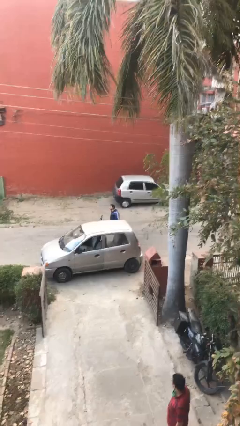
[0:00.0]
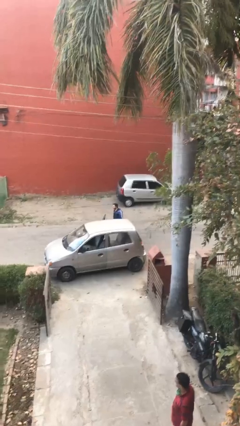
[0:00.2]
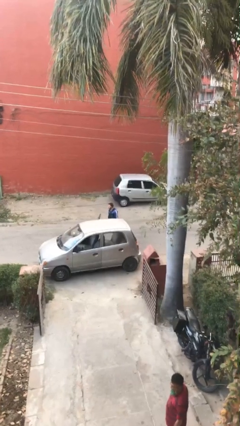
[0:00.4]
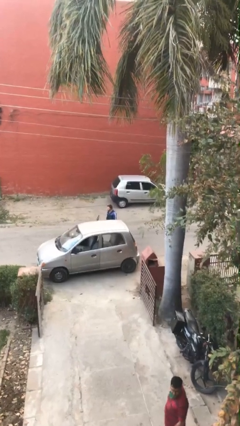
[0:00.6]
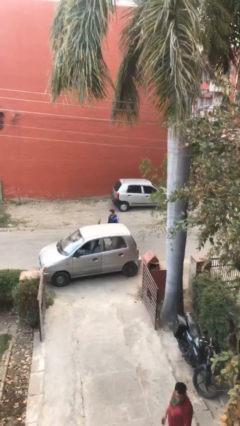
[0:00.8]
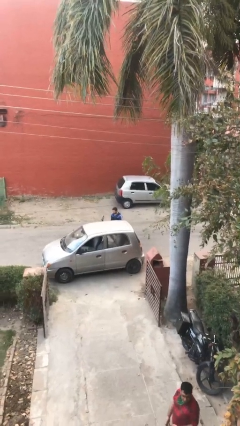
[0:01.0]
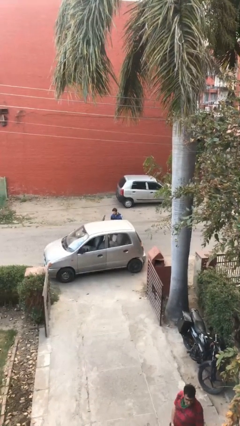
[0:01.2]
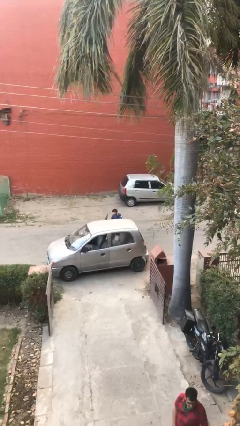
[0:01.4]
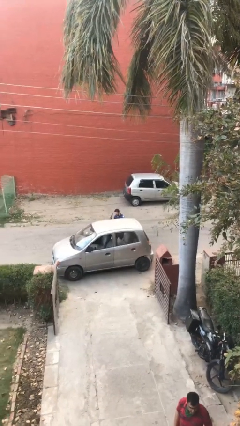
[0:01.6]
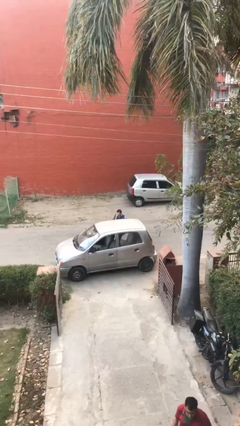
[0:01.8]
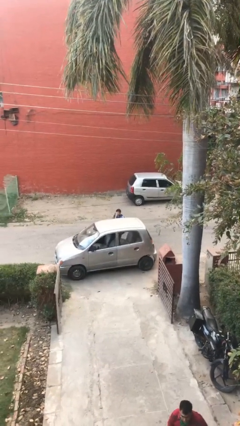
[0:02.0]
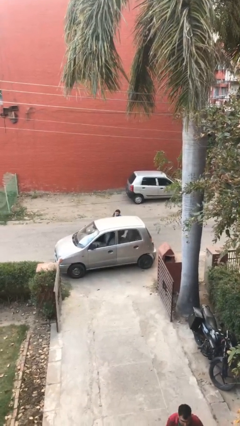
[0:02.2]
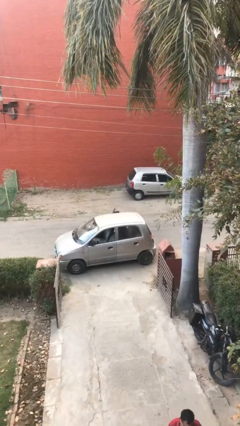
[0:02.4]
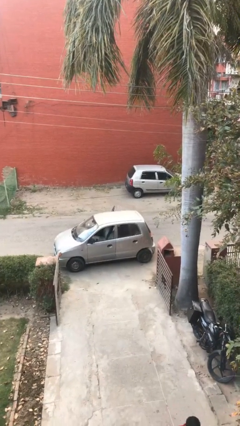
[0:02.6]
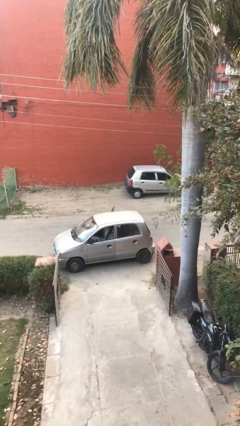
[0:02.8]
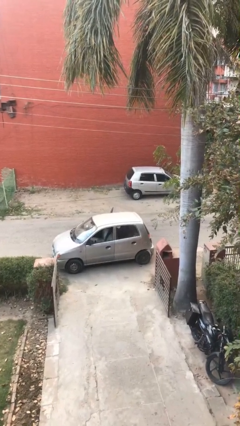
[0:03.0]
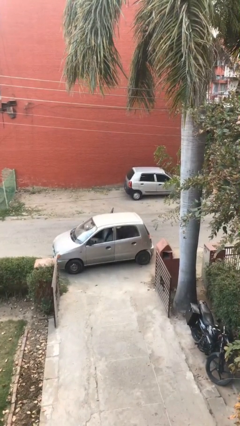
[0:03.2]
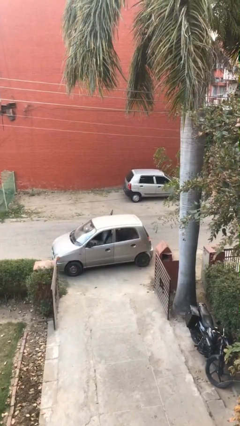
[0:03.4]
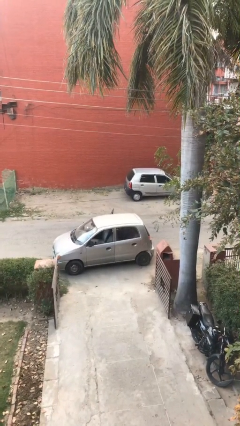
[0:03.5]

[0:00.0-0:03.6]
person enters car

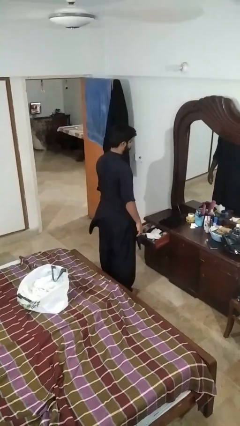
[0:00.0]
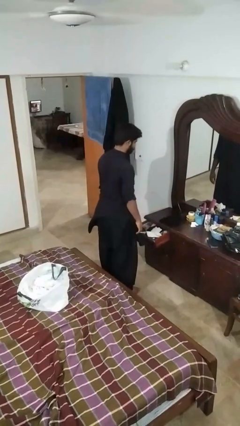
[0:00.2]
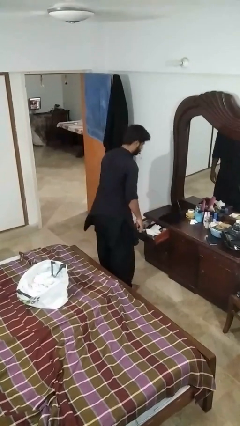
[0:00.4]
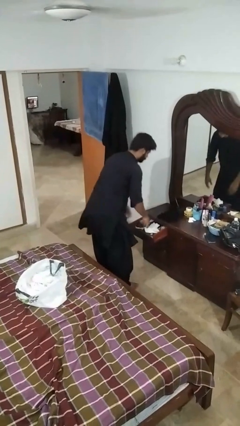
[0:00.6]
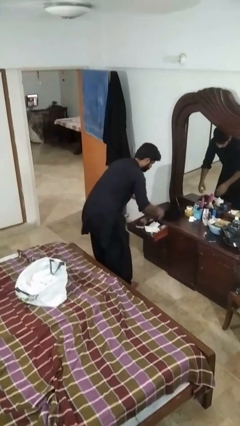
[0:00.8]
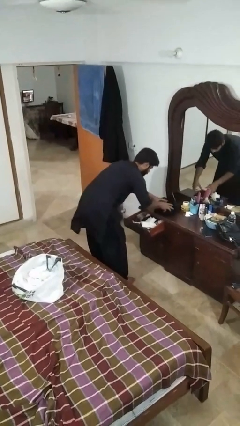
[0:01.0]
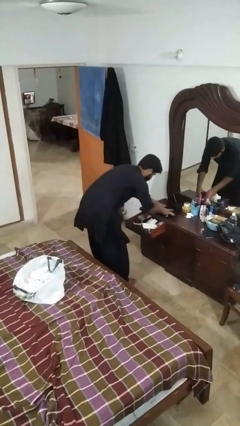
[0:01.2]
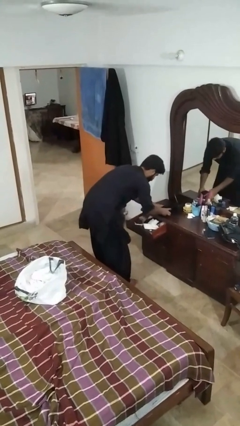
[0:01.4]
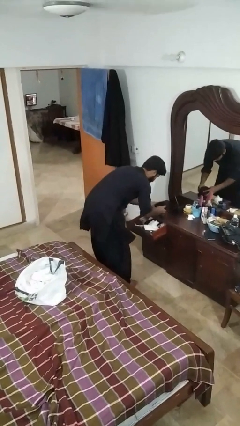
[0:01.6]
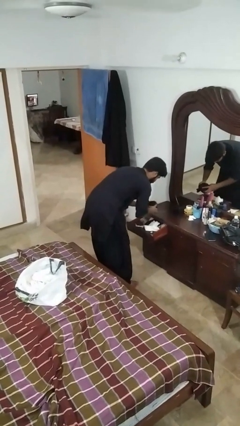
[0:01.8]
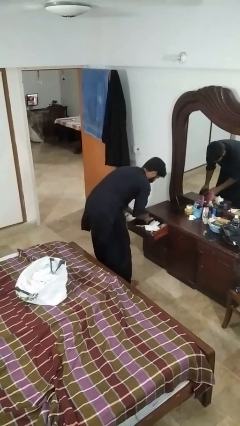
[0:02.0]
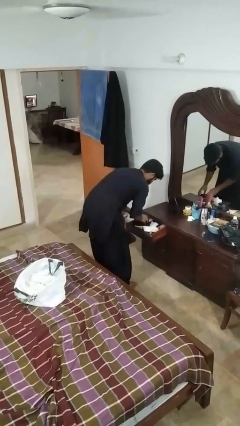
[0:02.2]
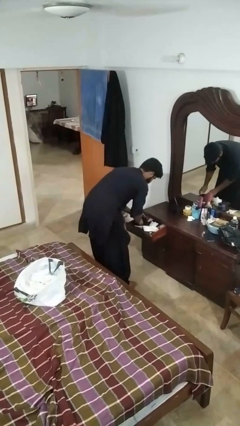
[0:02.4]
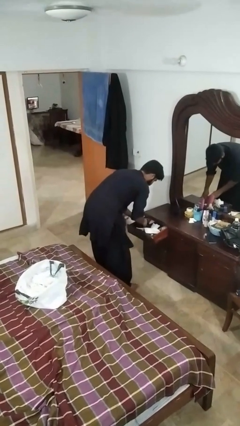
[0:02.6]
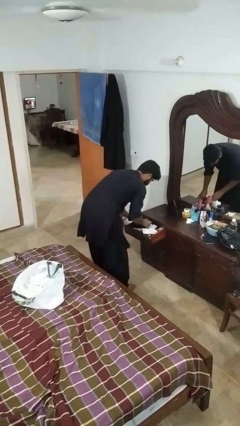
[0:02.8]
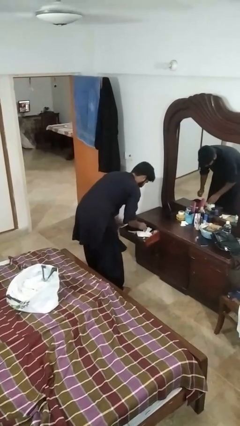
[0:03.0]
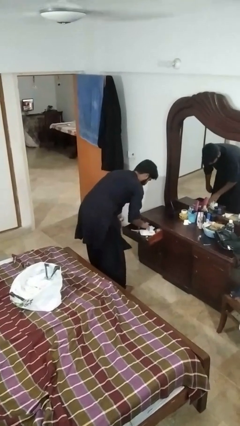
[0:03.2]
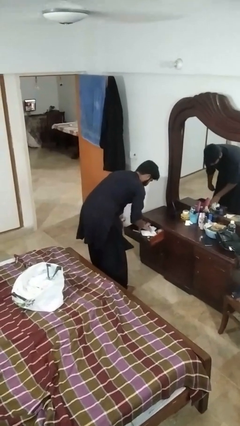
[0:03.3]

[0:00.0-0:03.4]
person puts clothes into dresser

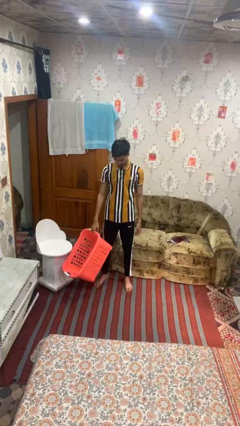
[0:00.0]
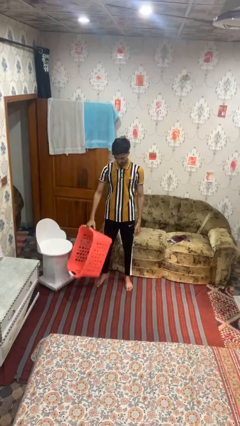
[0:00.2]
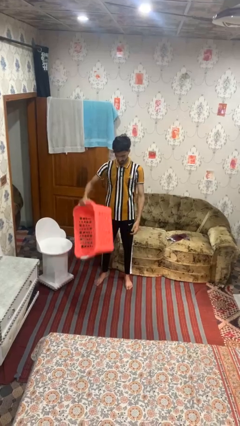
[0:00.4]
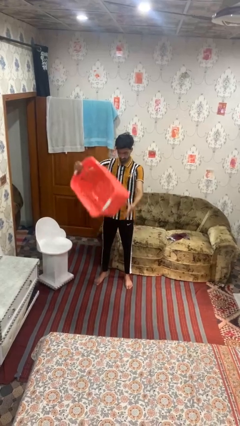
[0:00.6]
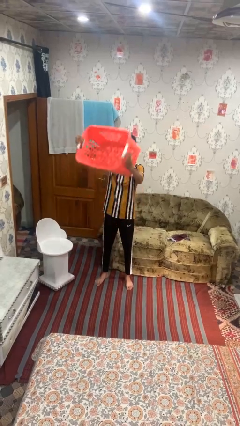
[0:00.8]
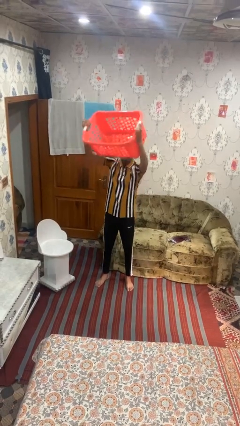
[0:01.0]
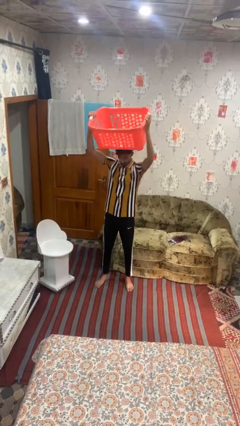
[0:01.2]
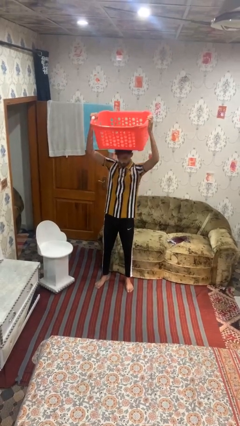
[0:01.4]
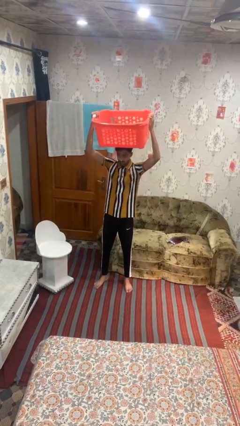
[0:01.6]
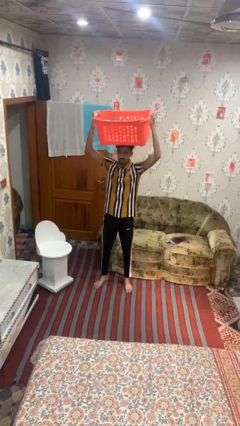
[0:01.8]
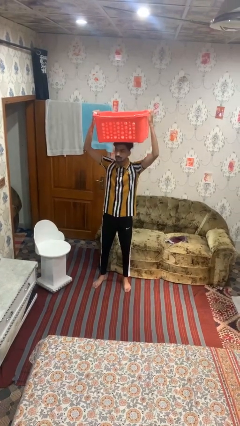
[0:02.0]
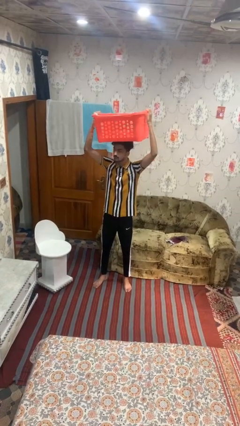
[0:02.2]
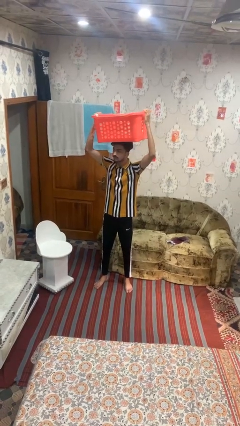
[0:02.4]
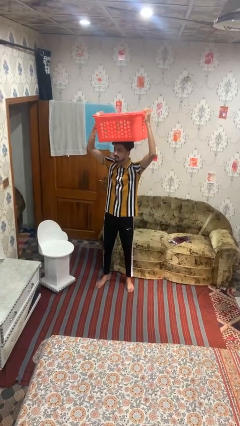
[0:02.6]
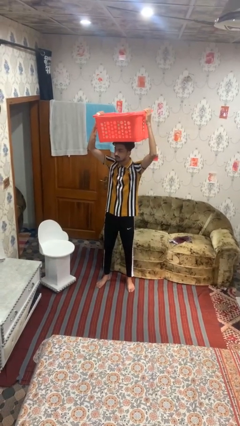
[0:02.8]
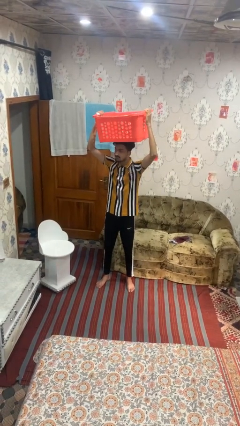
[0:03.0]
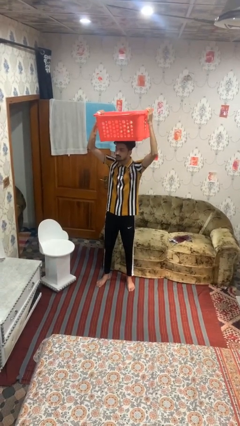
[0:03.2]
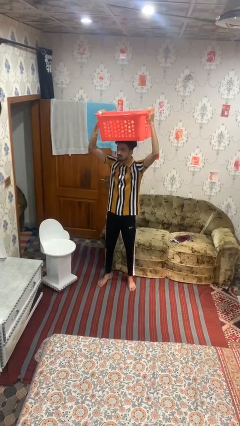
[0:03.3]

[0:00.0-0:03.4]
person holds object above head

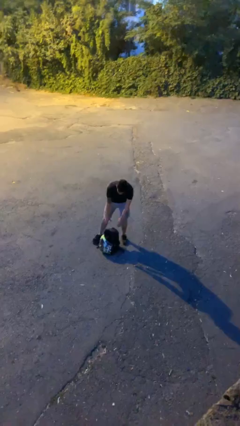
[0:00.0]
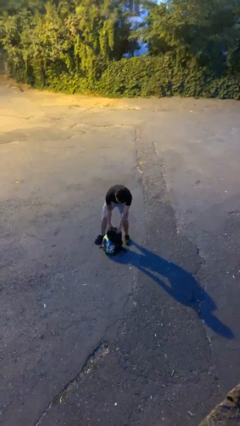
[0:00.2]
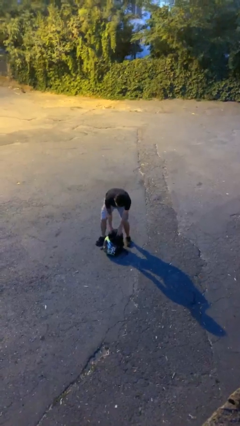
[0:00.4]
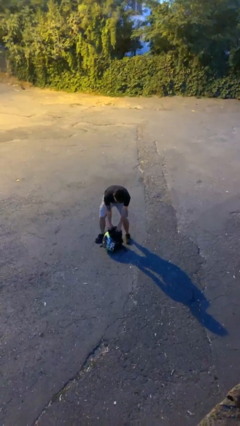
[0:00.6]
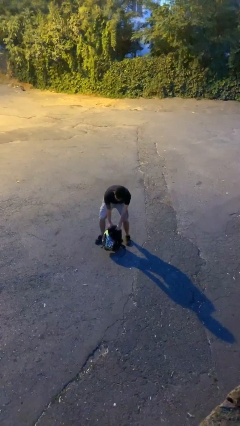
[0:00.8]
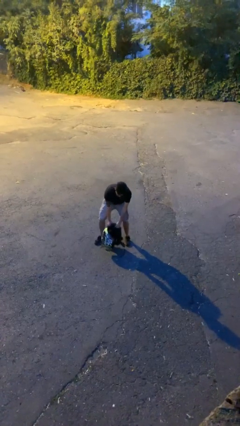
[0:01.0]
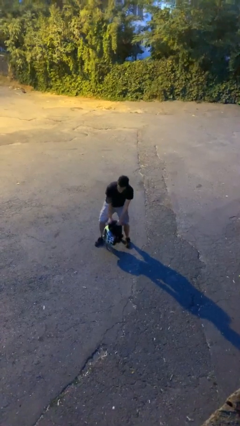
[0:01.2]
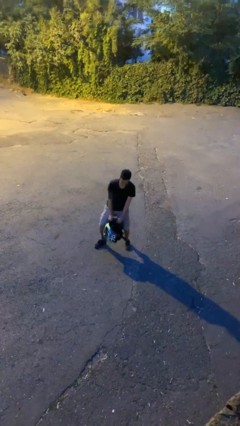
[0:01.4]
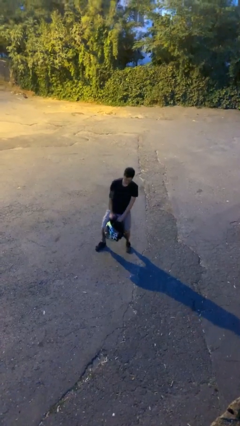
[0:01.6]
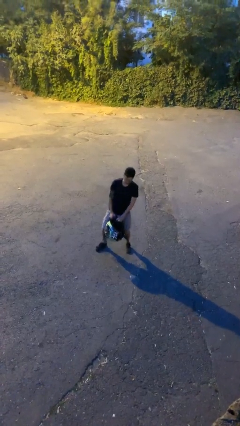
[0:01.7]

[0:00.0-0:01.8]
person picks up object from floor

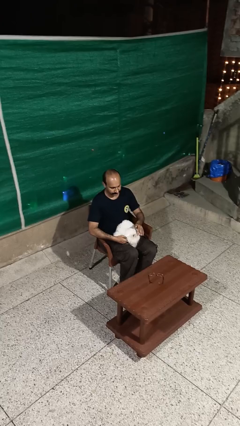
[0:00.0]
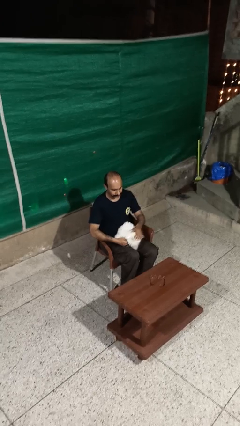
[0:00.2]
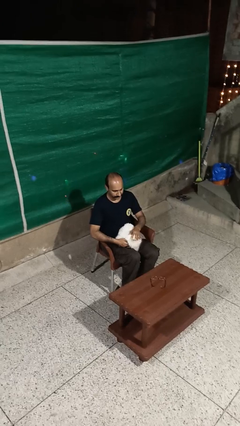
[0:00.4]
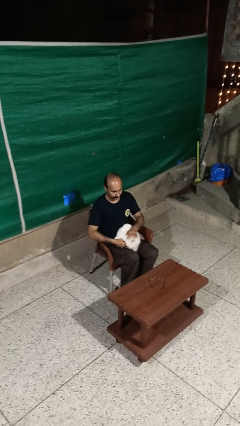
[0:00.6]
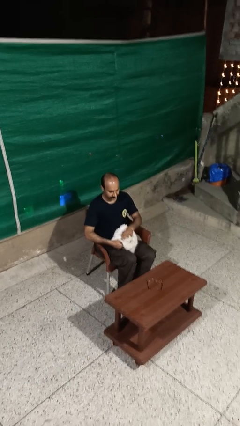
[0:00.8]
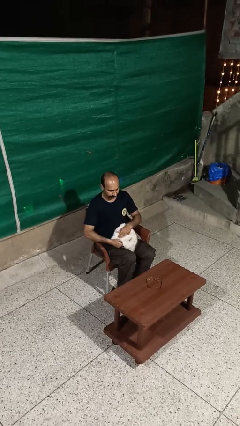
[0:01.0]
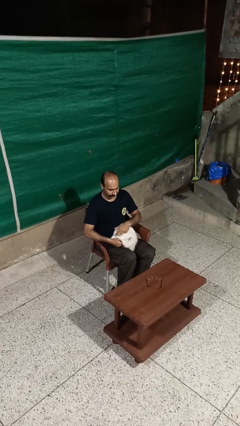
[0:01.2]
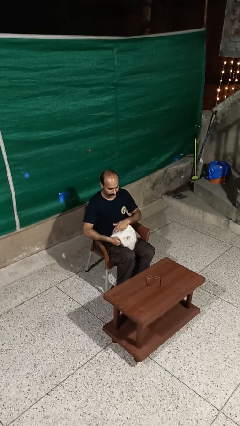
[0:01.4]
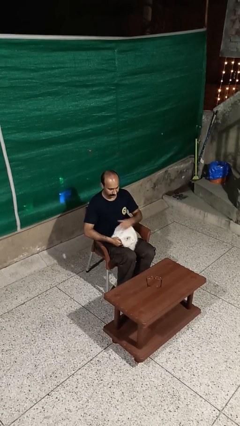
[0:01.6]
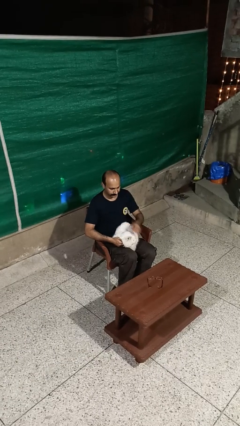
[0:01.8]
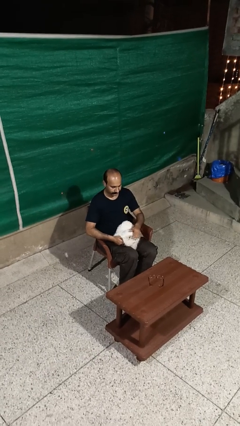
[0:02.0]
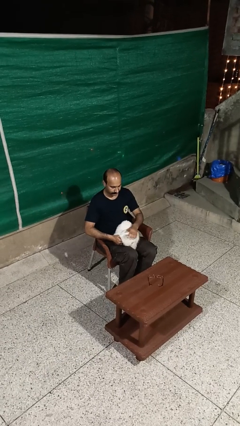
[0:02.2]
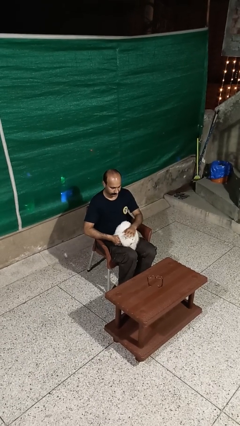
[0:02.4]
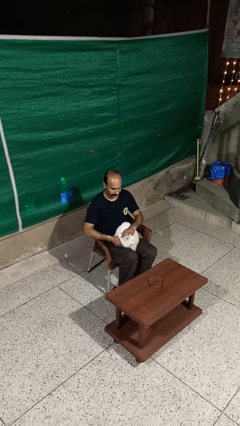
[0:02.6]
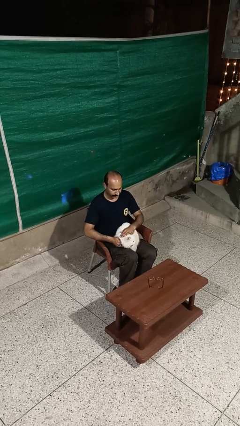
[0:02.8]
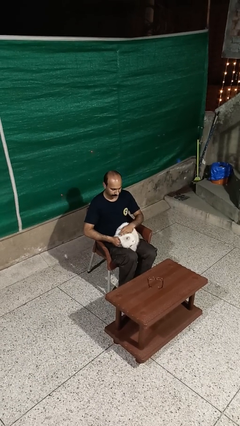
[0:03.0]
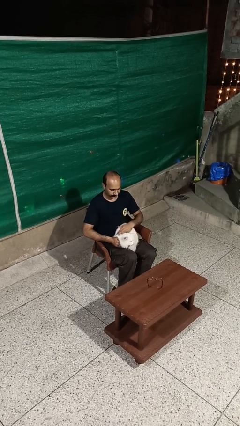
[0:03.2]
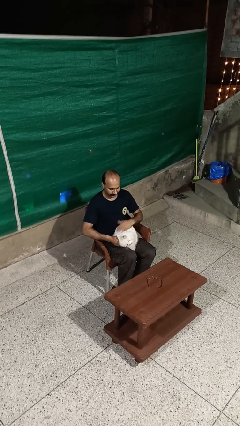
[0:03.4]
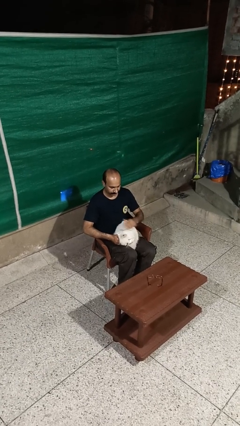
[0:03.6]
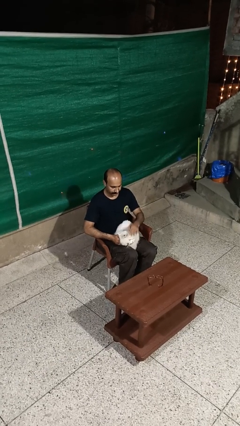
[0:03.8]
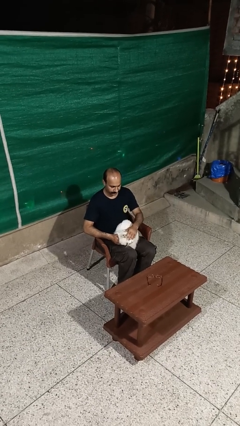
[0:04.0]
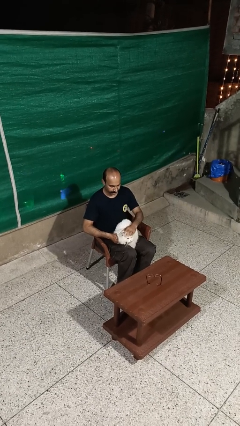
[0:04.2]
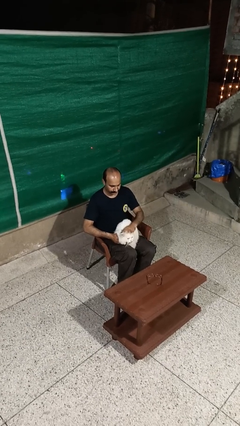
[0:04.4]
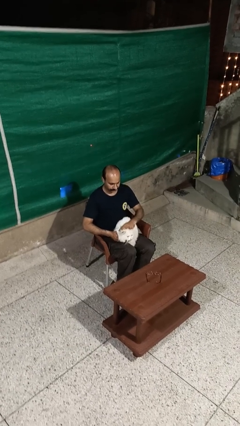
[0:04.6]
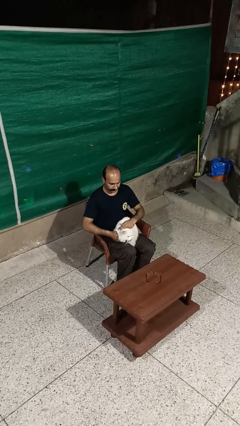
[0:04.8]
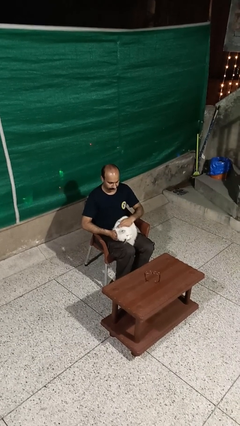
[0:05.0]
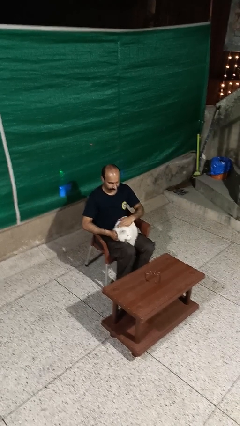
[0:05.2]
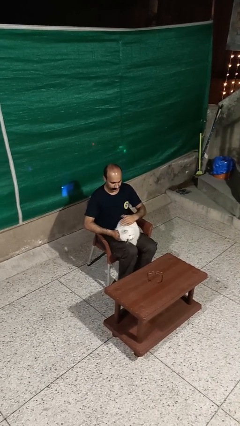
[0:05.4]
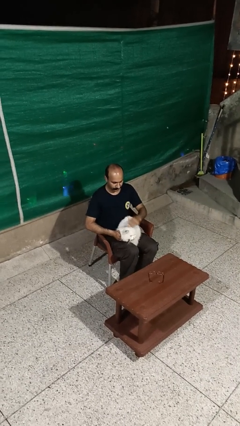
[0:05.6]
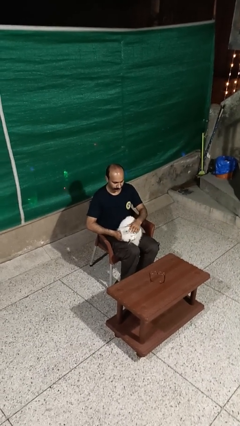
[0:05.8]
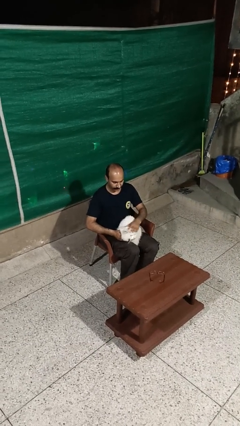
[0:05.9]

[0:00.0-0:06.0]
person pets cat
